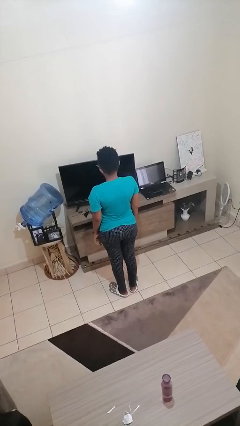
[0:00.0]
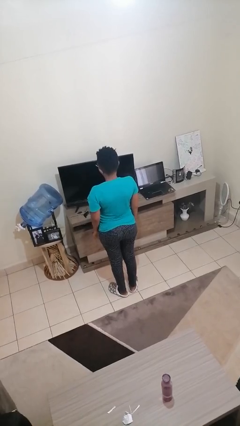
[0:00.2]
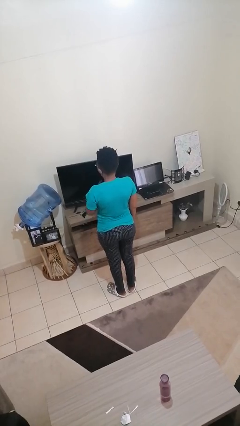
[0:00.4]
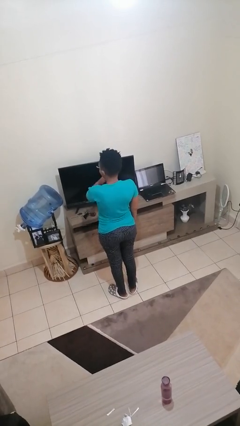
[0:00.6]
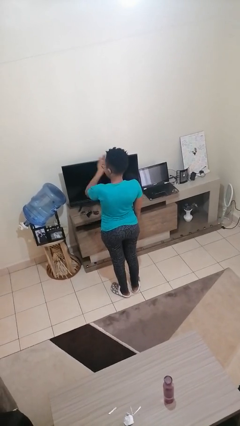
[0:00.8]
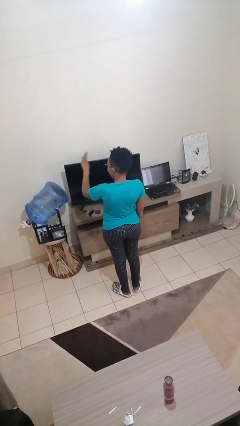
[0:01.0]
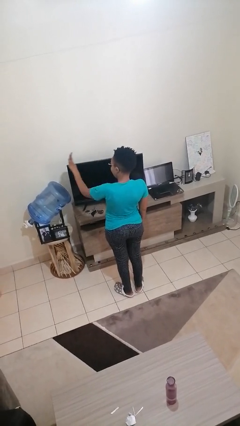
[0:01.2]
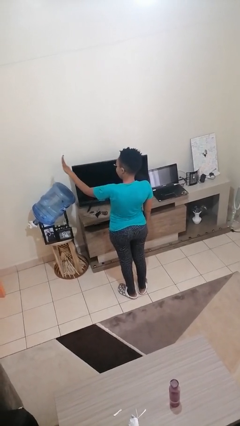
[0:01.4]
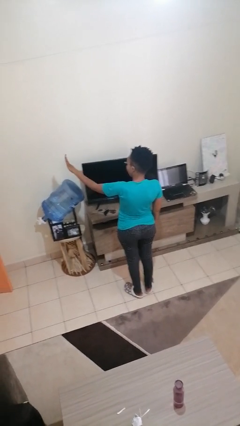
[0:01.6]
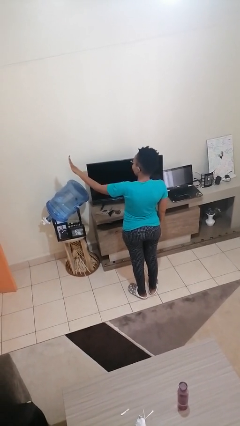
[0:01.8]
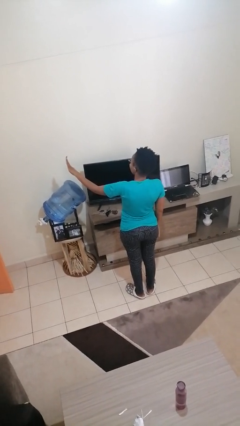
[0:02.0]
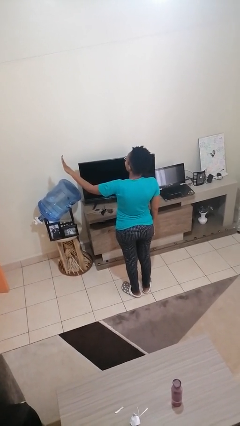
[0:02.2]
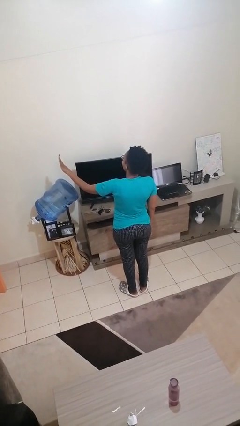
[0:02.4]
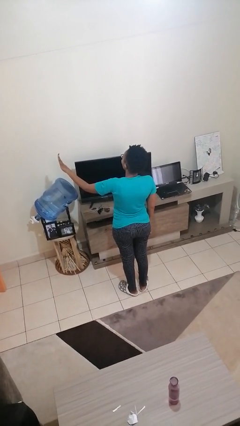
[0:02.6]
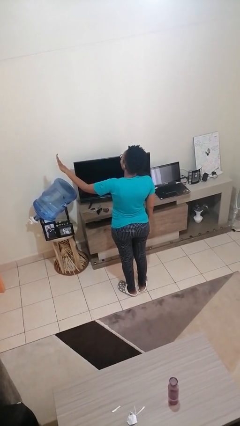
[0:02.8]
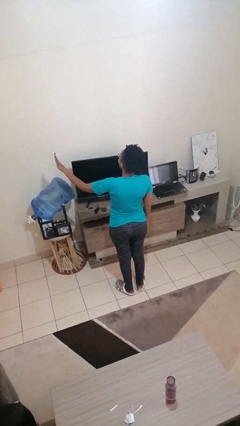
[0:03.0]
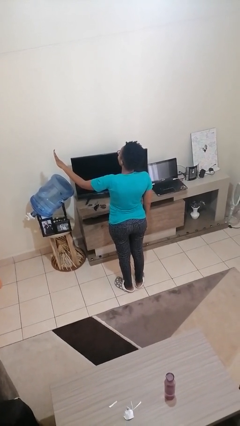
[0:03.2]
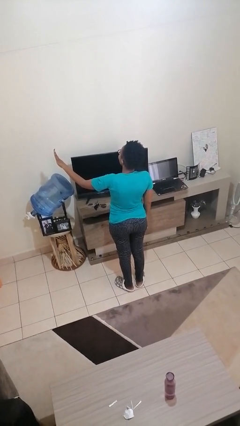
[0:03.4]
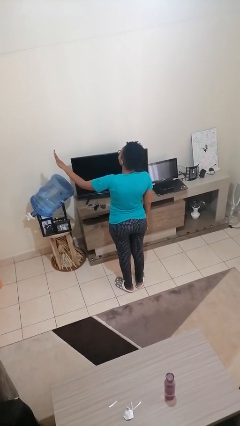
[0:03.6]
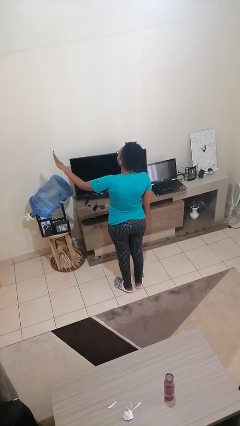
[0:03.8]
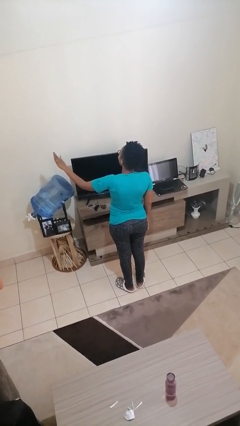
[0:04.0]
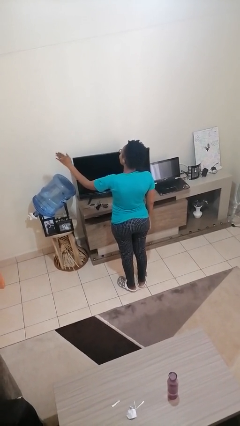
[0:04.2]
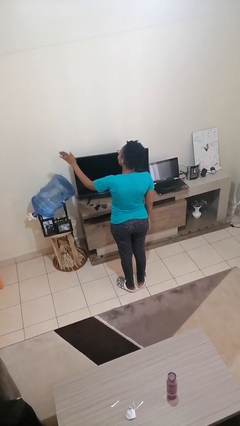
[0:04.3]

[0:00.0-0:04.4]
person gestures swipe left

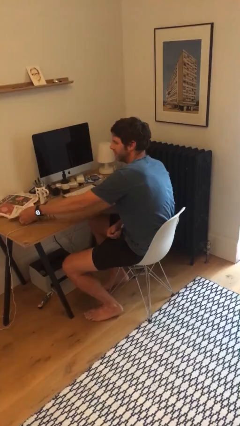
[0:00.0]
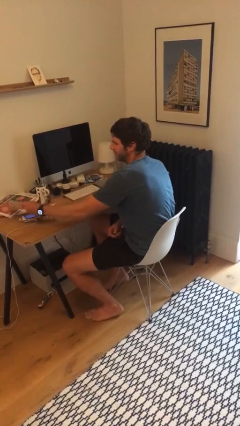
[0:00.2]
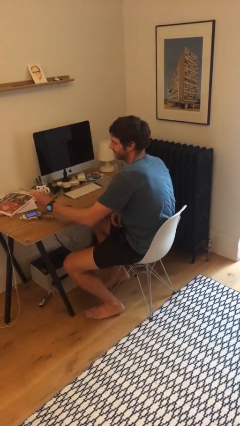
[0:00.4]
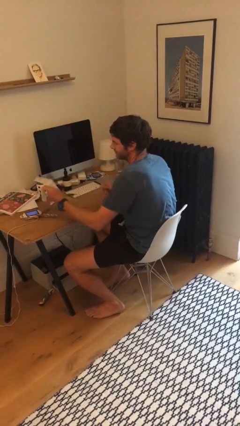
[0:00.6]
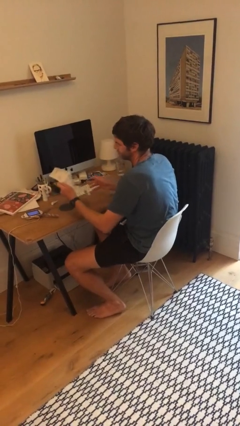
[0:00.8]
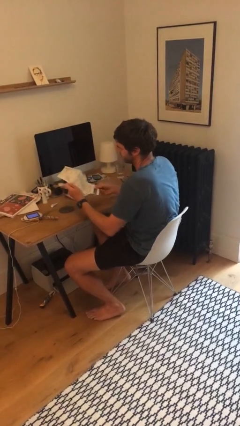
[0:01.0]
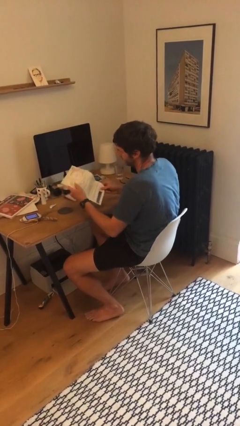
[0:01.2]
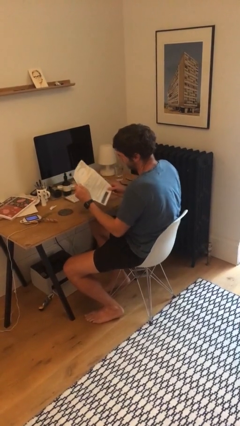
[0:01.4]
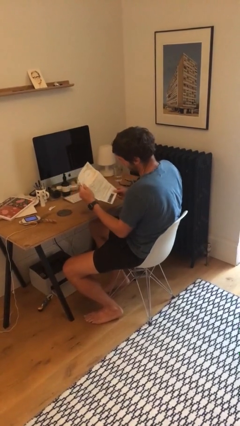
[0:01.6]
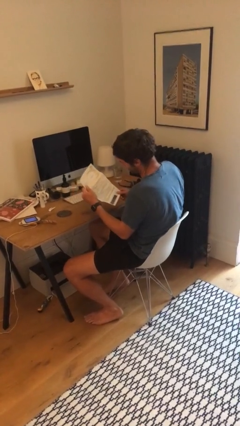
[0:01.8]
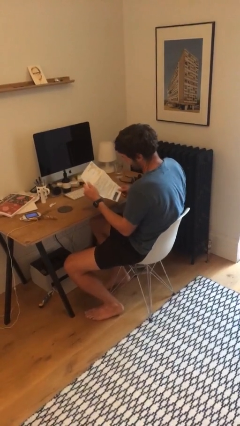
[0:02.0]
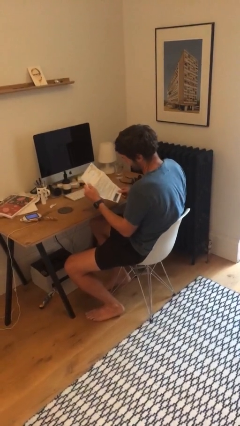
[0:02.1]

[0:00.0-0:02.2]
person picks up object from table

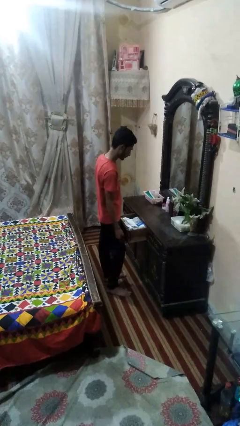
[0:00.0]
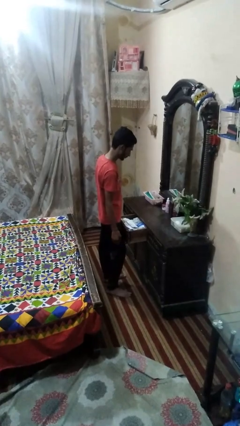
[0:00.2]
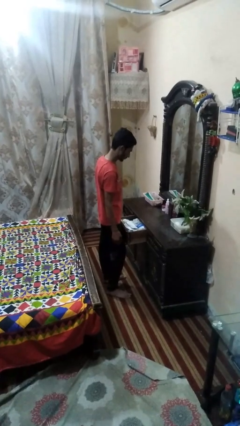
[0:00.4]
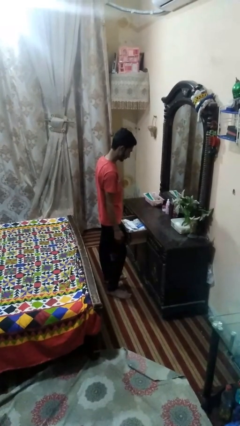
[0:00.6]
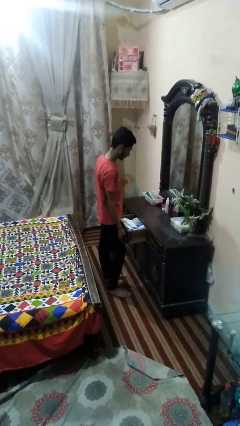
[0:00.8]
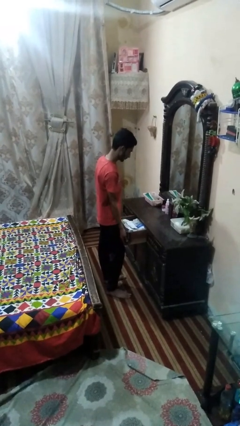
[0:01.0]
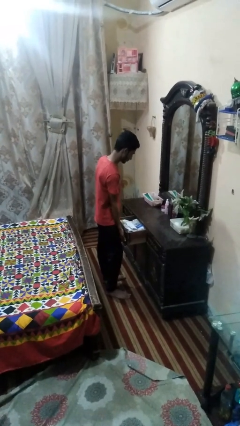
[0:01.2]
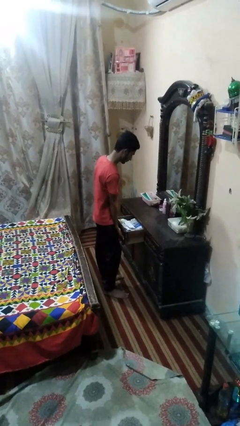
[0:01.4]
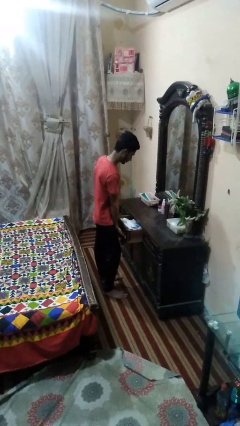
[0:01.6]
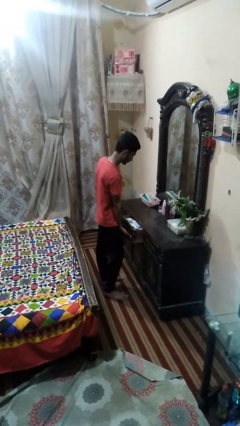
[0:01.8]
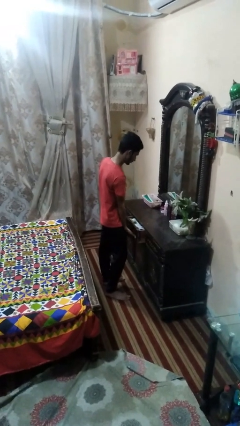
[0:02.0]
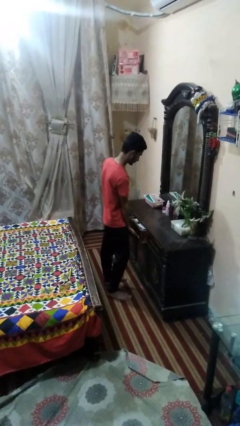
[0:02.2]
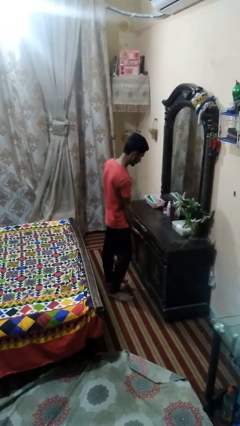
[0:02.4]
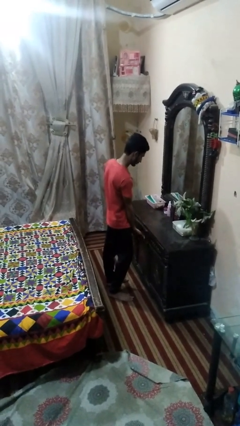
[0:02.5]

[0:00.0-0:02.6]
person closes dresser drawer

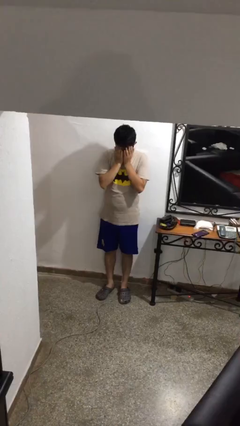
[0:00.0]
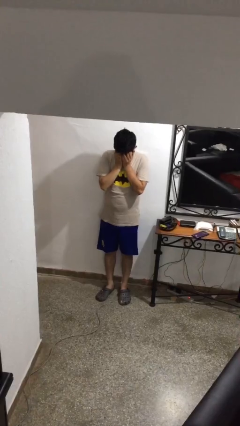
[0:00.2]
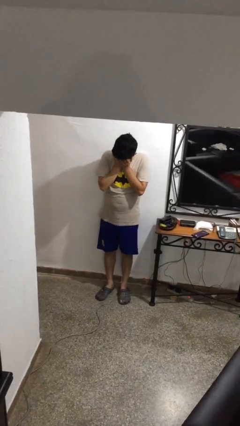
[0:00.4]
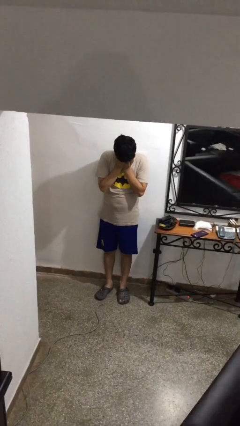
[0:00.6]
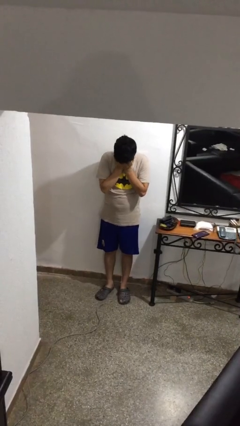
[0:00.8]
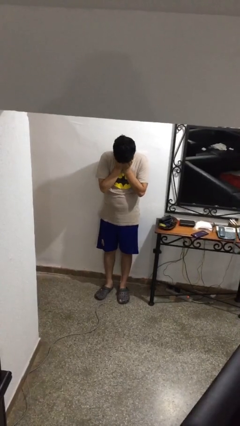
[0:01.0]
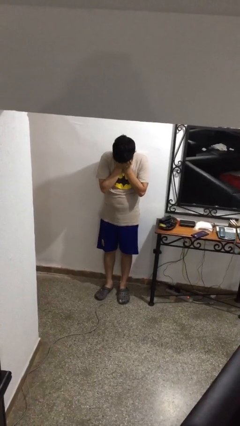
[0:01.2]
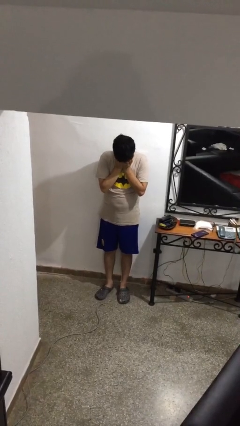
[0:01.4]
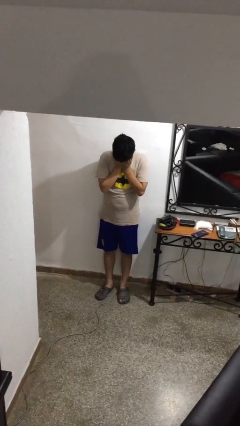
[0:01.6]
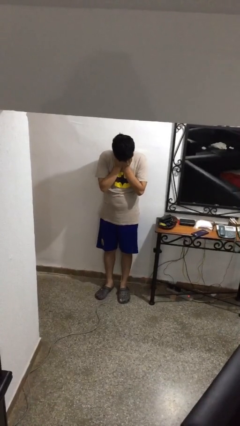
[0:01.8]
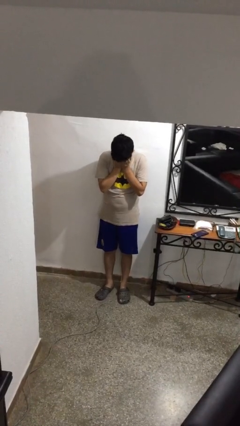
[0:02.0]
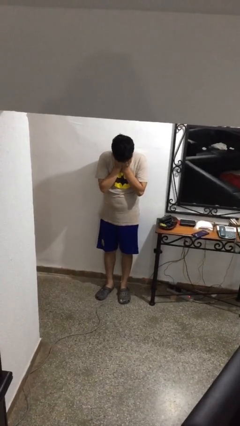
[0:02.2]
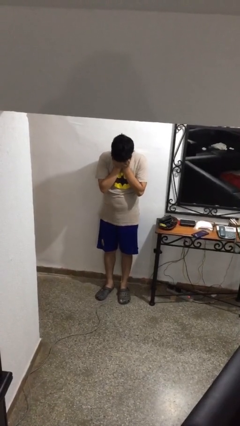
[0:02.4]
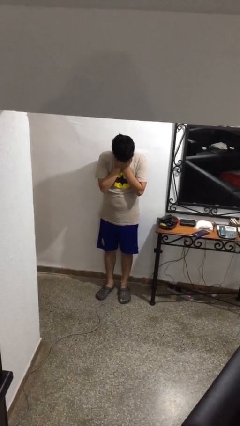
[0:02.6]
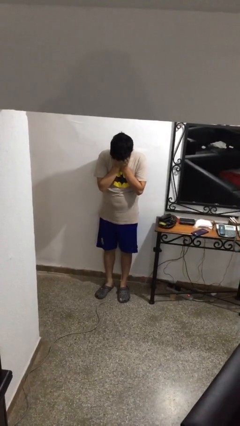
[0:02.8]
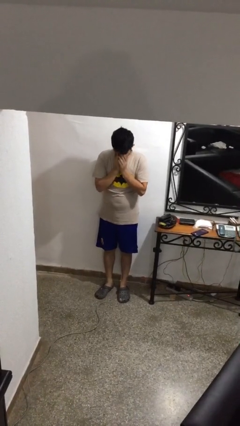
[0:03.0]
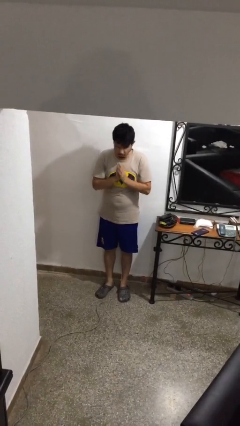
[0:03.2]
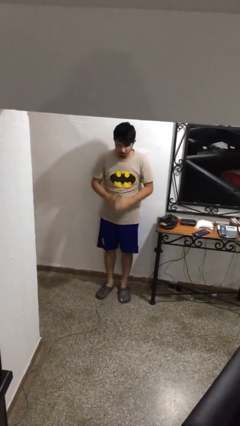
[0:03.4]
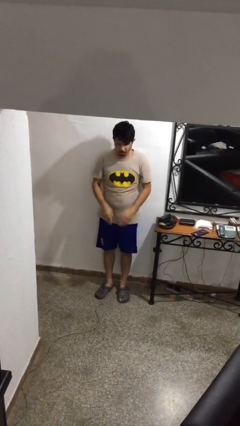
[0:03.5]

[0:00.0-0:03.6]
person covers face with hands

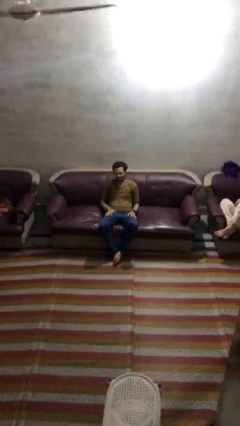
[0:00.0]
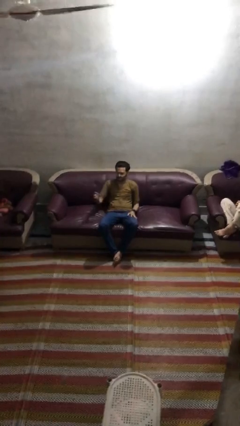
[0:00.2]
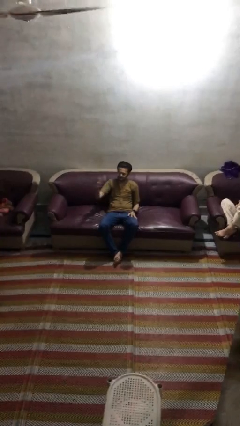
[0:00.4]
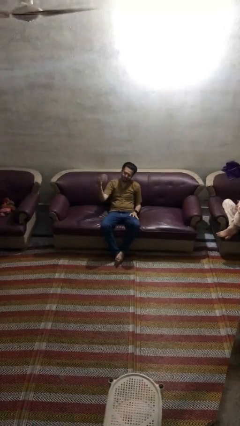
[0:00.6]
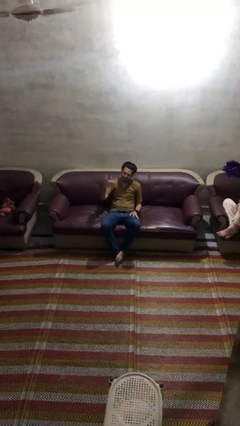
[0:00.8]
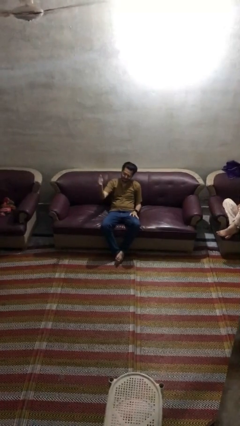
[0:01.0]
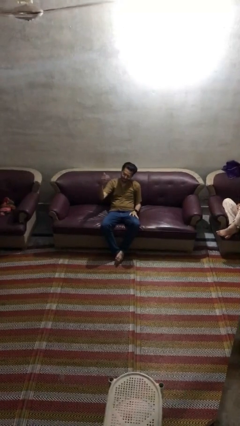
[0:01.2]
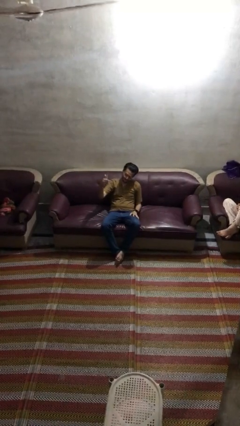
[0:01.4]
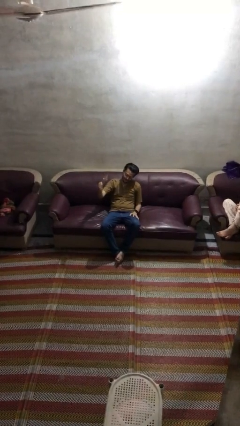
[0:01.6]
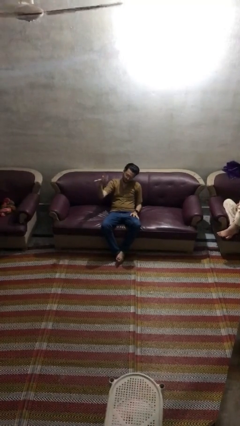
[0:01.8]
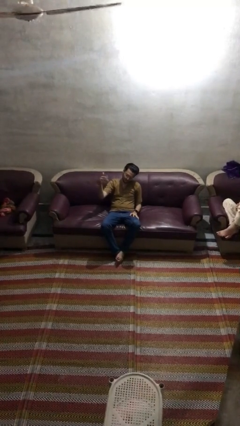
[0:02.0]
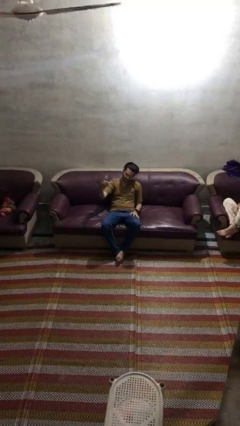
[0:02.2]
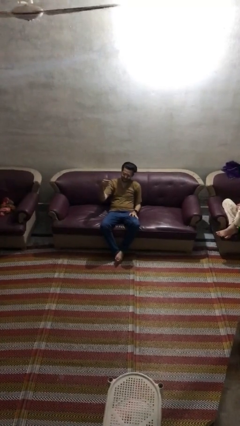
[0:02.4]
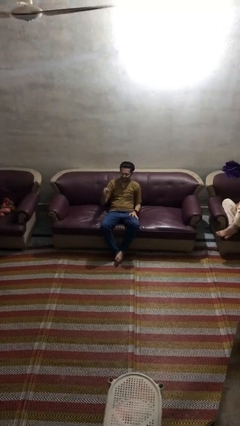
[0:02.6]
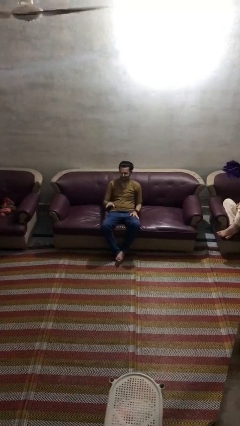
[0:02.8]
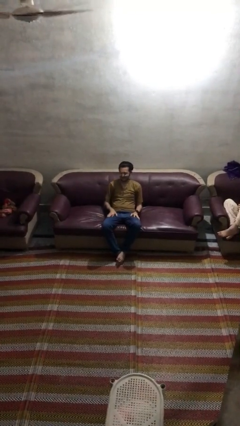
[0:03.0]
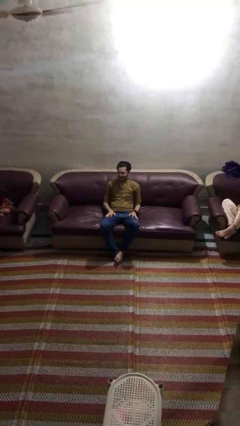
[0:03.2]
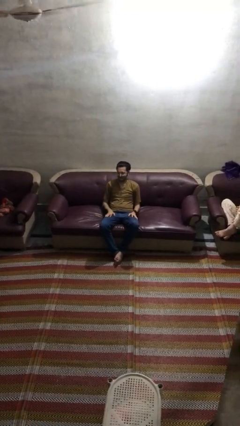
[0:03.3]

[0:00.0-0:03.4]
person gestures come here

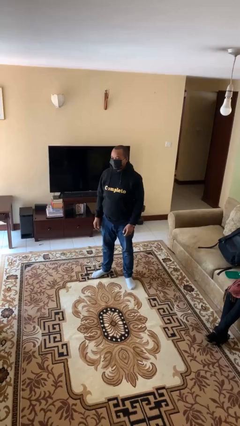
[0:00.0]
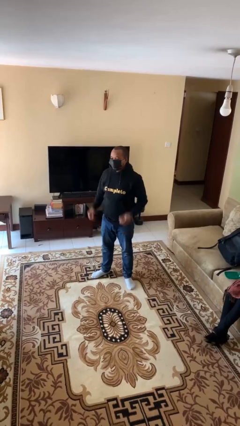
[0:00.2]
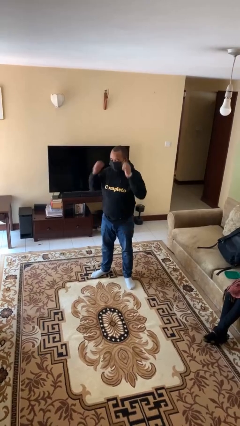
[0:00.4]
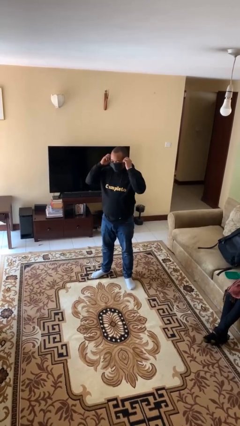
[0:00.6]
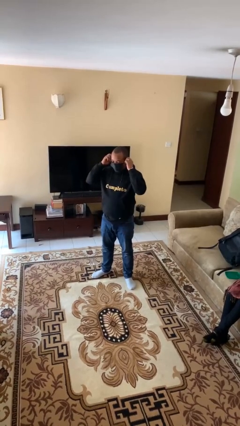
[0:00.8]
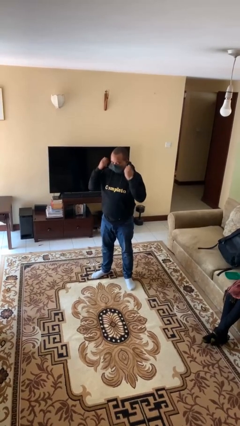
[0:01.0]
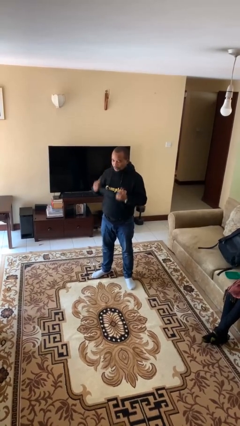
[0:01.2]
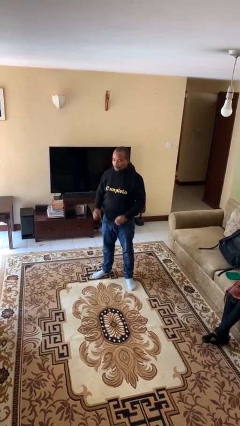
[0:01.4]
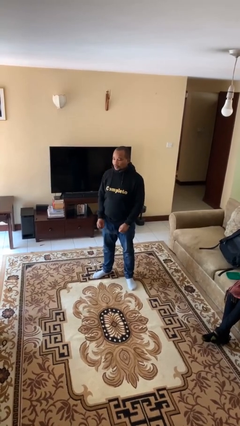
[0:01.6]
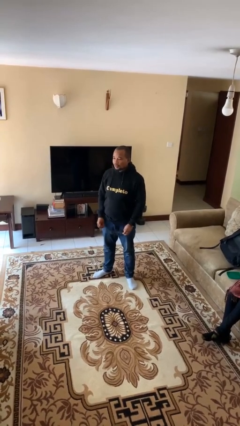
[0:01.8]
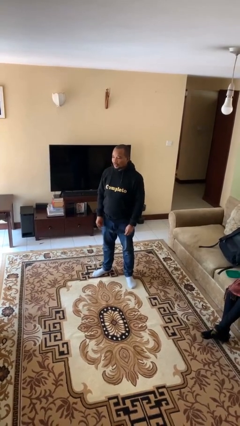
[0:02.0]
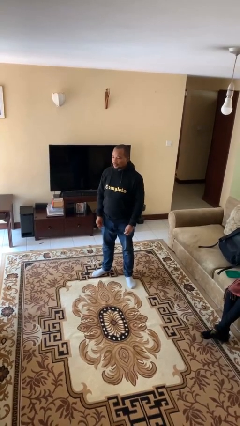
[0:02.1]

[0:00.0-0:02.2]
person takes off facemask
